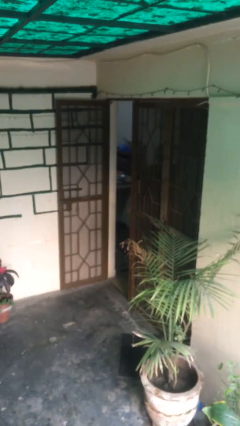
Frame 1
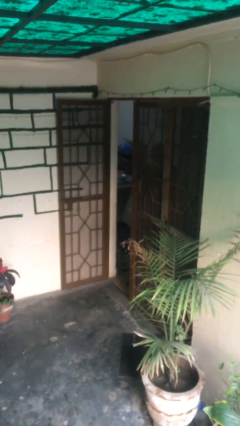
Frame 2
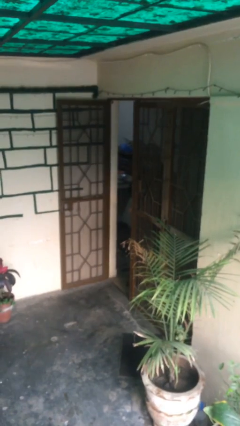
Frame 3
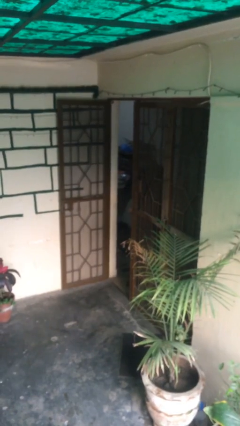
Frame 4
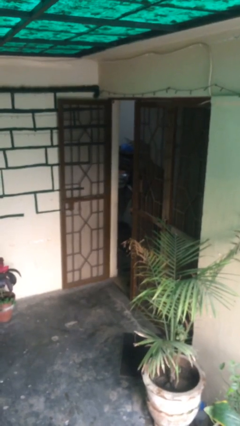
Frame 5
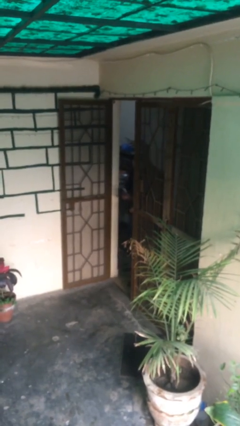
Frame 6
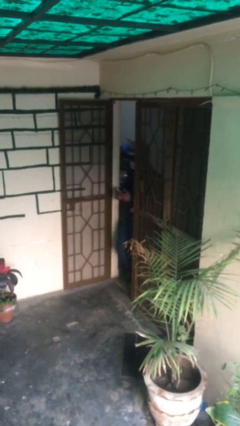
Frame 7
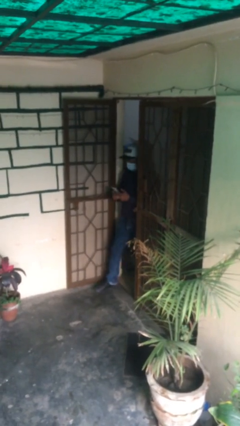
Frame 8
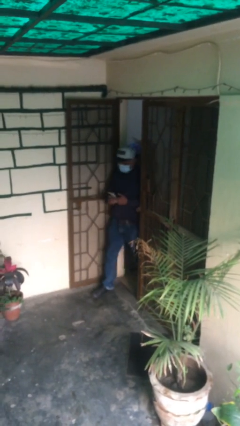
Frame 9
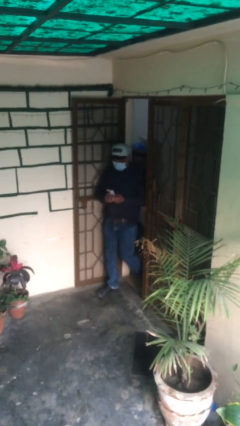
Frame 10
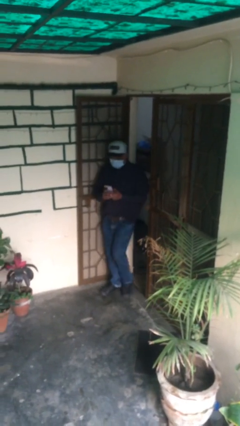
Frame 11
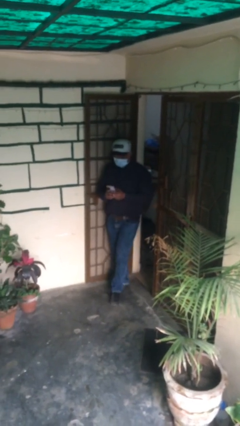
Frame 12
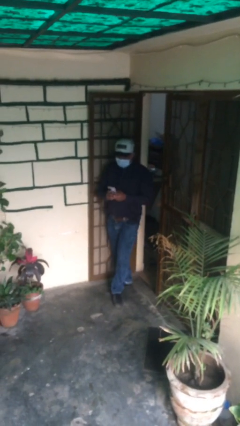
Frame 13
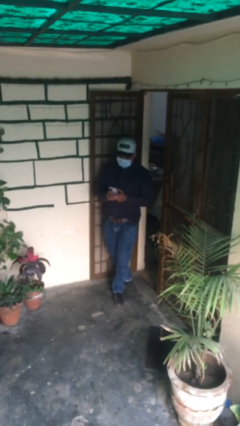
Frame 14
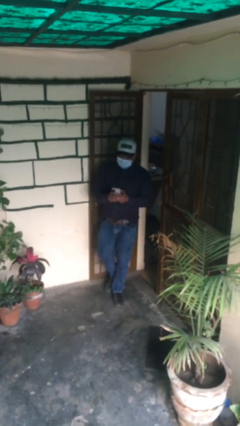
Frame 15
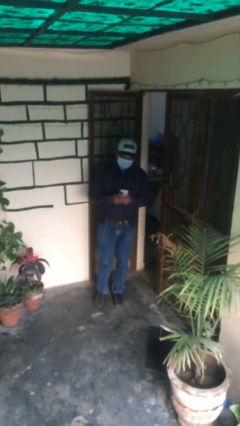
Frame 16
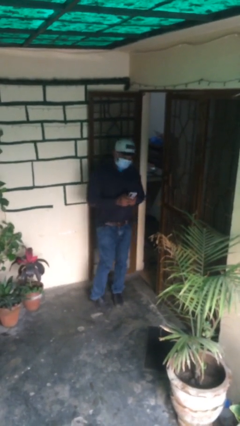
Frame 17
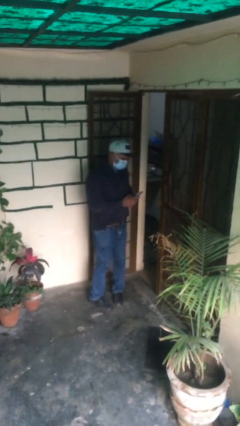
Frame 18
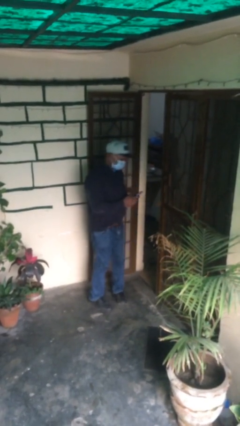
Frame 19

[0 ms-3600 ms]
person enters scene through structure

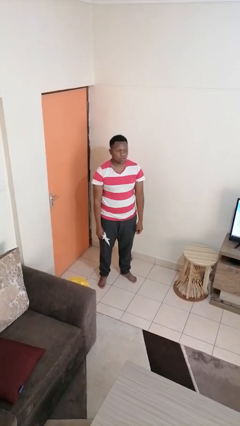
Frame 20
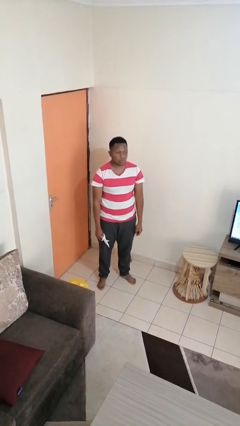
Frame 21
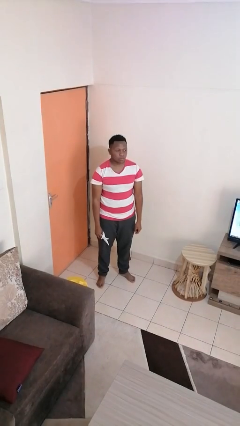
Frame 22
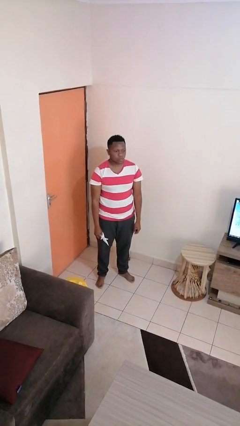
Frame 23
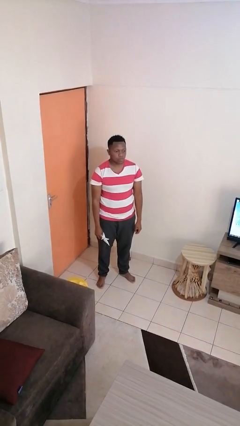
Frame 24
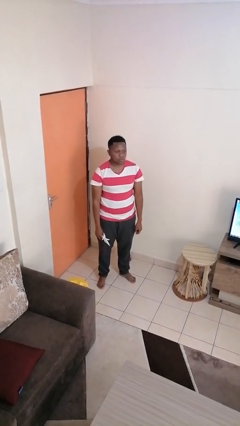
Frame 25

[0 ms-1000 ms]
person blows nose

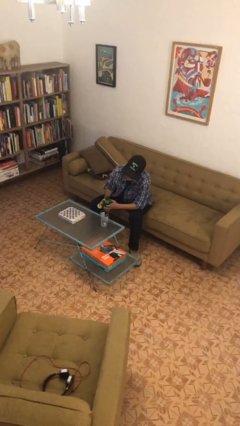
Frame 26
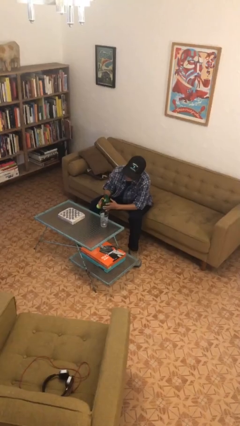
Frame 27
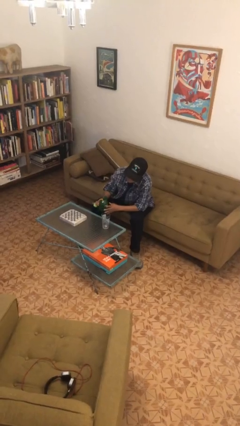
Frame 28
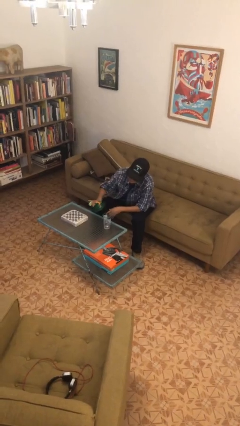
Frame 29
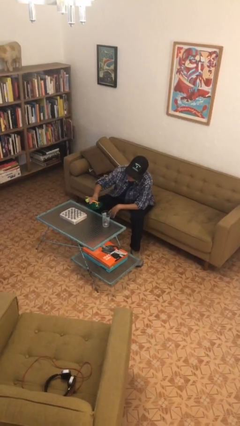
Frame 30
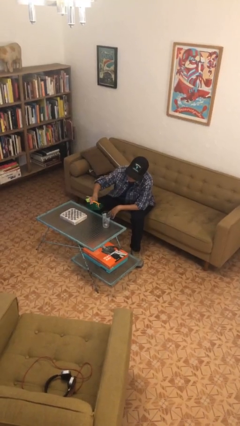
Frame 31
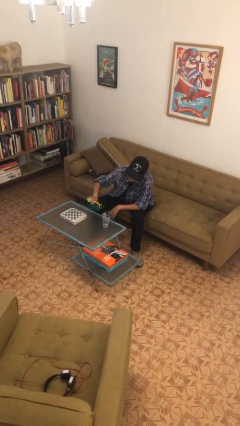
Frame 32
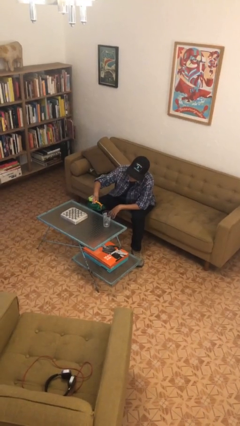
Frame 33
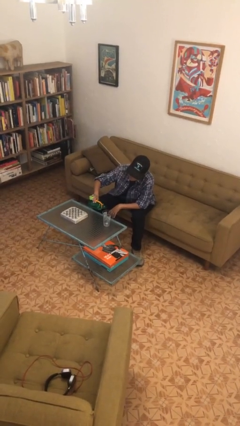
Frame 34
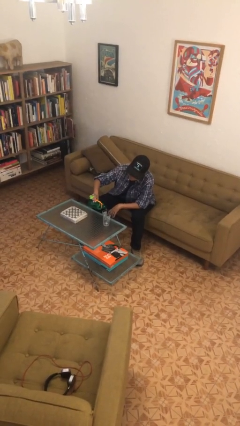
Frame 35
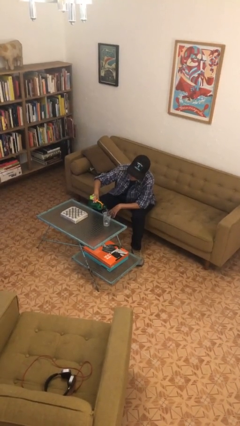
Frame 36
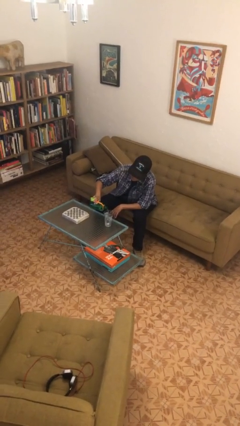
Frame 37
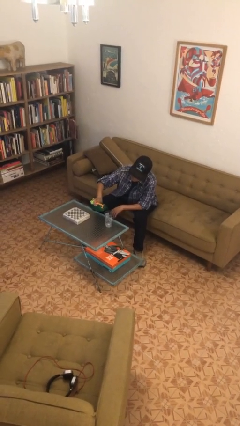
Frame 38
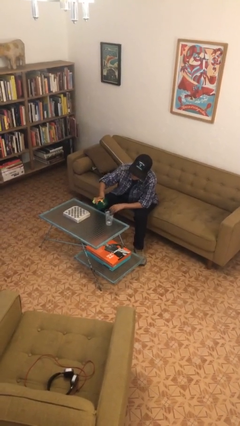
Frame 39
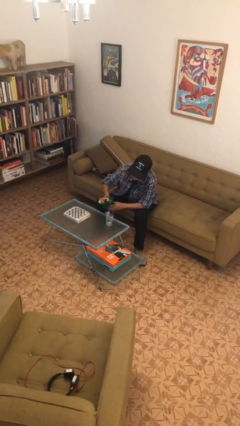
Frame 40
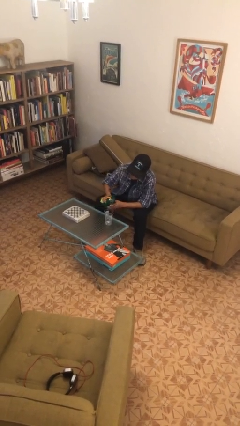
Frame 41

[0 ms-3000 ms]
person pours liquid into cup

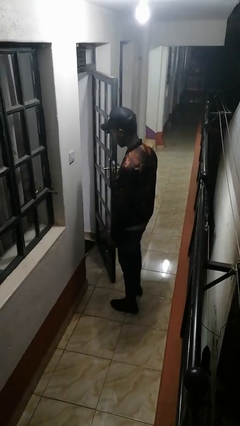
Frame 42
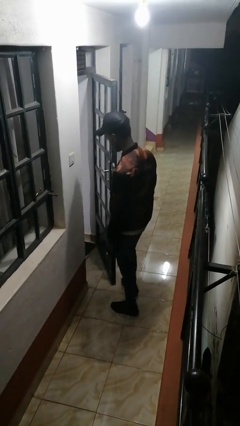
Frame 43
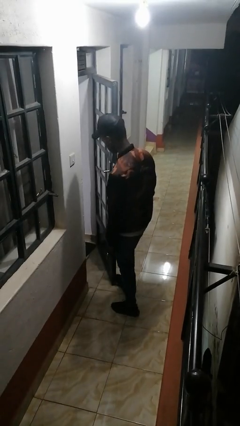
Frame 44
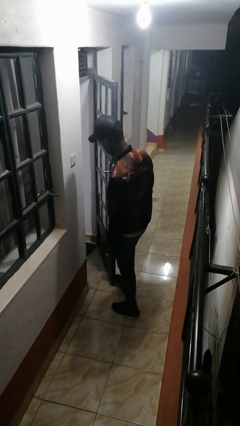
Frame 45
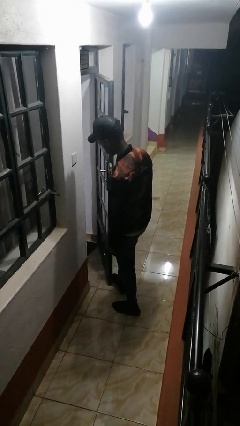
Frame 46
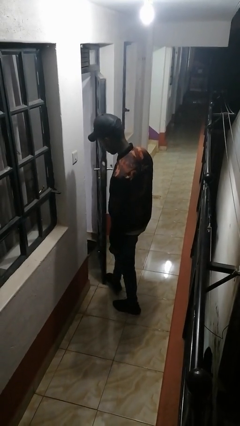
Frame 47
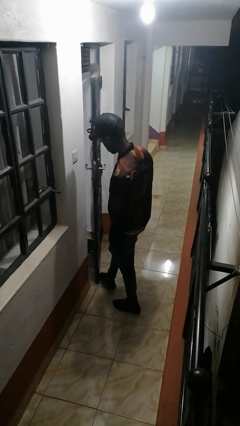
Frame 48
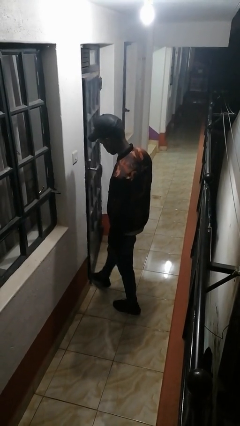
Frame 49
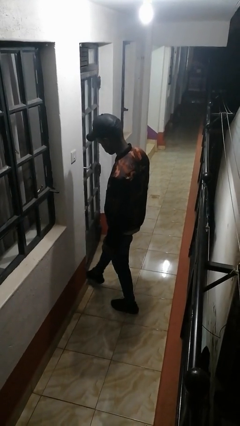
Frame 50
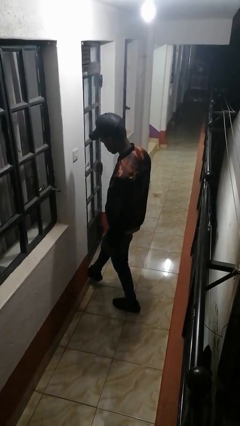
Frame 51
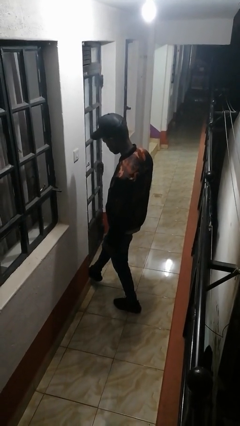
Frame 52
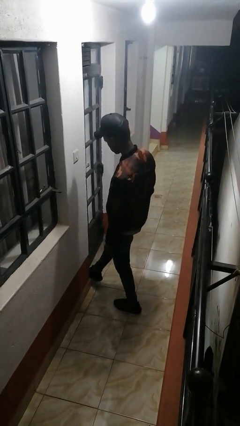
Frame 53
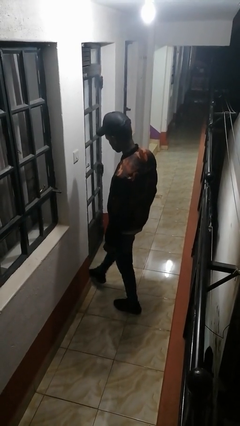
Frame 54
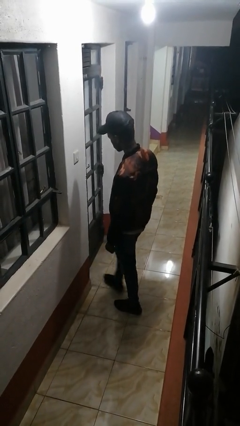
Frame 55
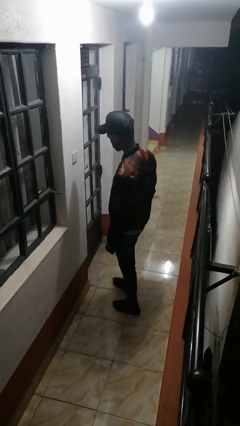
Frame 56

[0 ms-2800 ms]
person closes door with foot

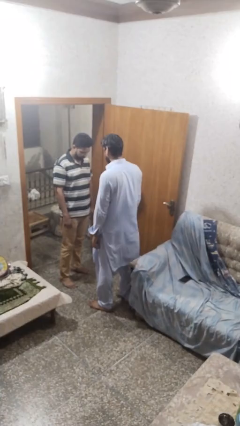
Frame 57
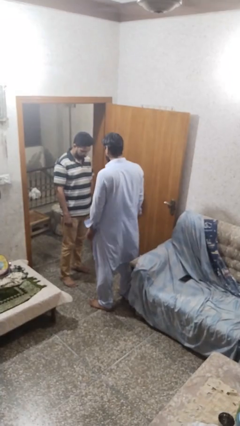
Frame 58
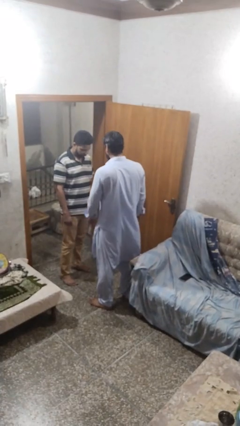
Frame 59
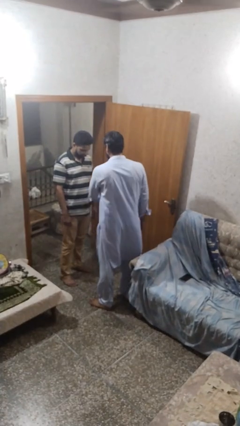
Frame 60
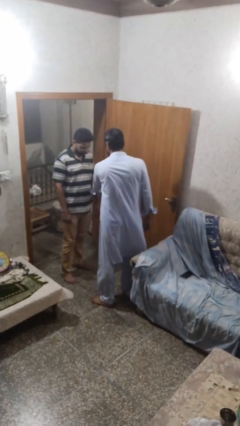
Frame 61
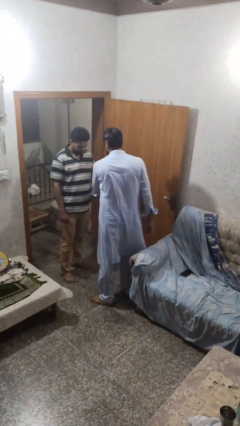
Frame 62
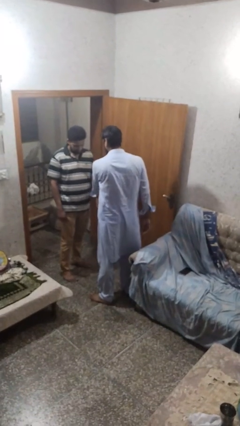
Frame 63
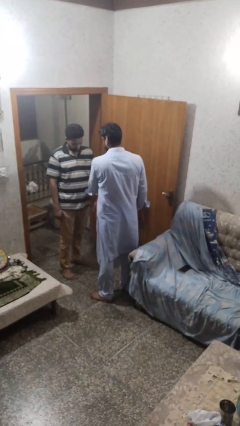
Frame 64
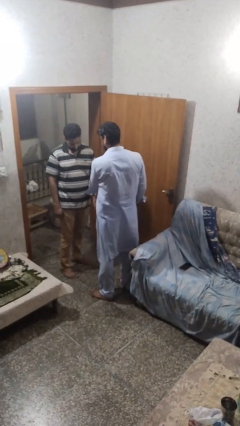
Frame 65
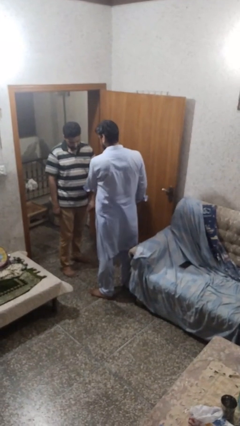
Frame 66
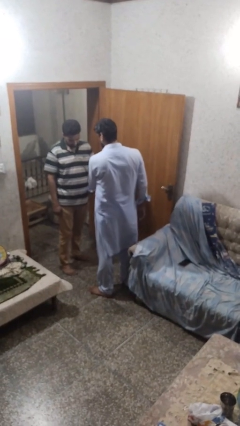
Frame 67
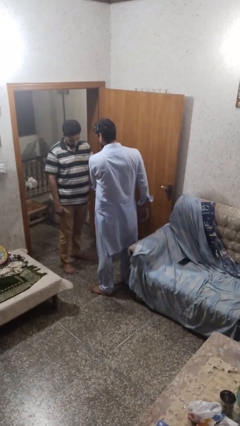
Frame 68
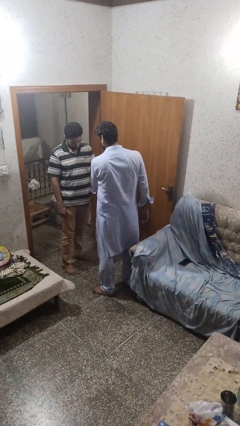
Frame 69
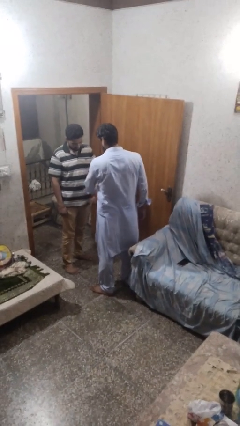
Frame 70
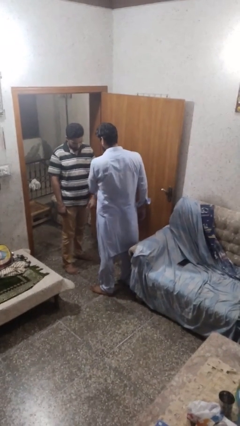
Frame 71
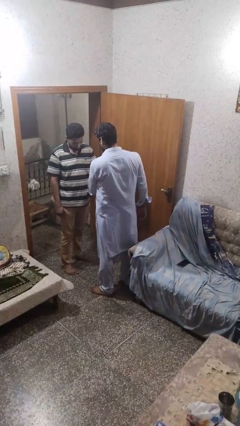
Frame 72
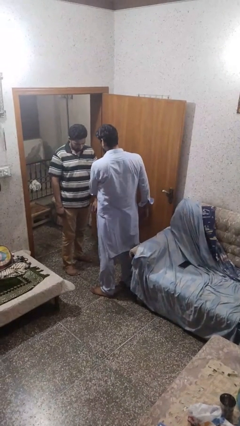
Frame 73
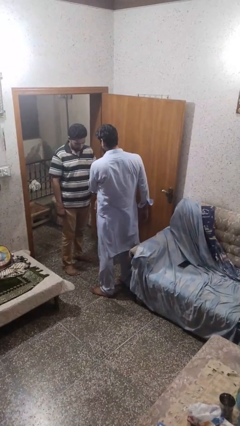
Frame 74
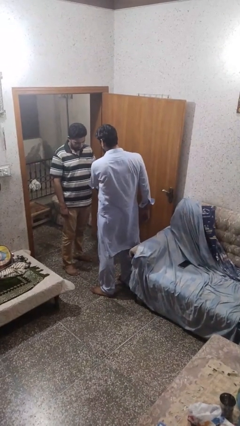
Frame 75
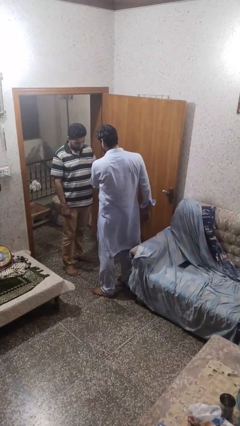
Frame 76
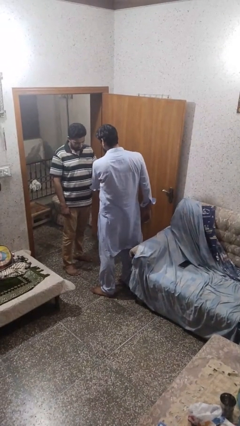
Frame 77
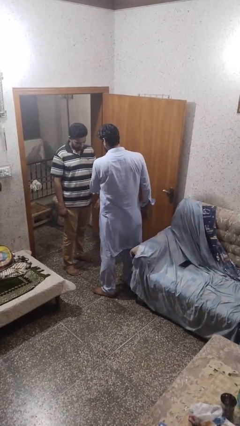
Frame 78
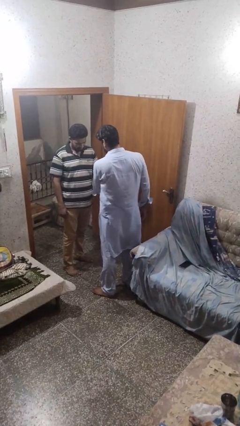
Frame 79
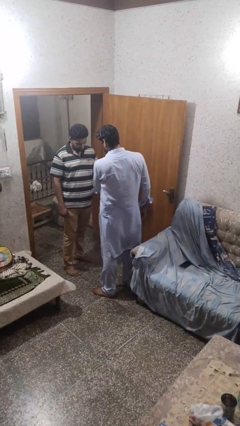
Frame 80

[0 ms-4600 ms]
person grabs person by forearm

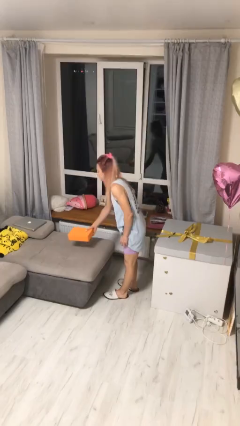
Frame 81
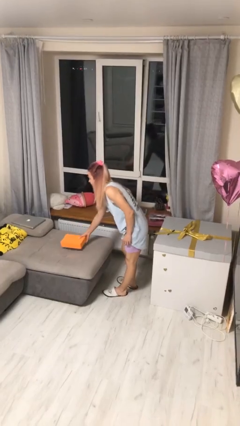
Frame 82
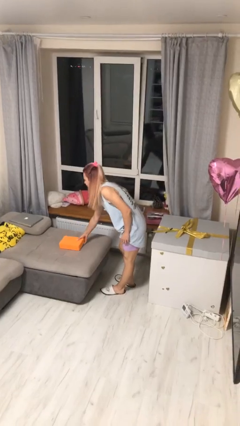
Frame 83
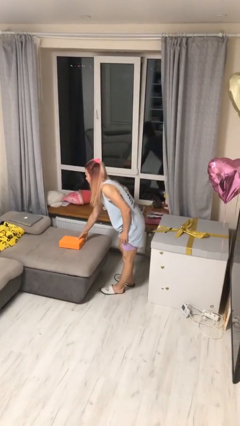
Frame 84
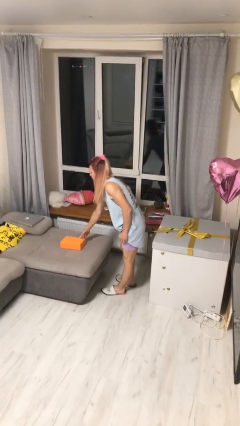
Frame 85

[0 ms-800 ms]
person puts down object on couch

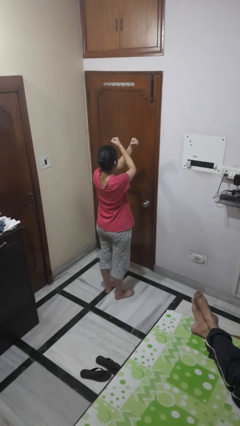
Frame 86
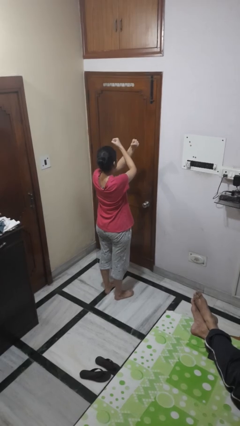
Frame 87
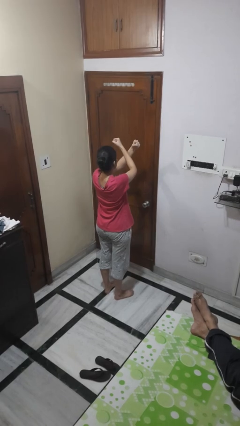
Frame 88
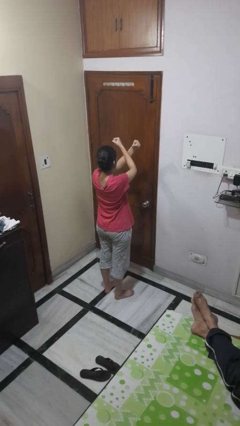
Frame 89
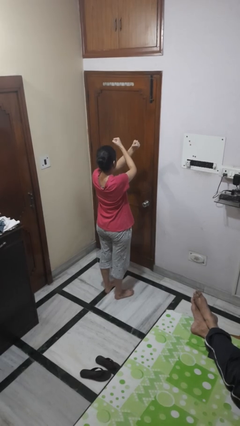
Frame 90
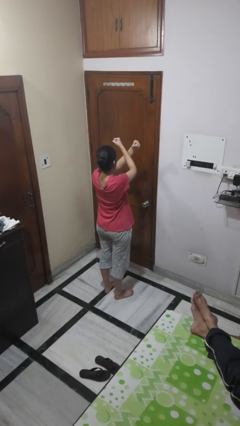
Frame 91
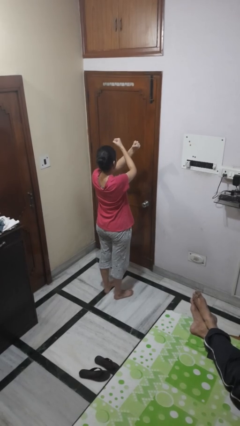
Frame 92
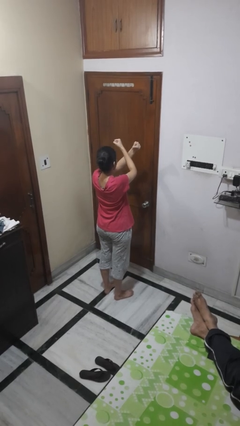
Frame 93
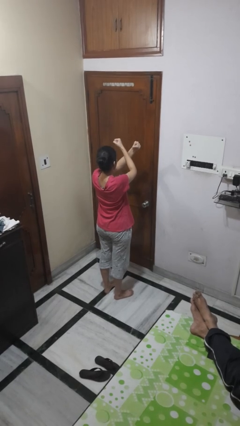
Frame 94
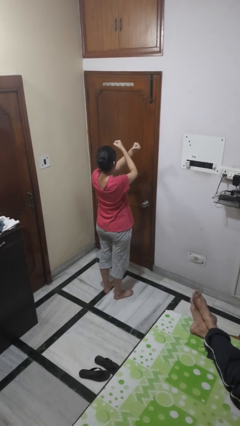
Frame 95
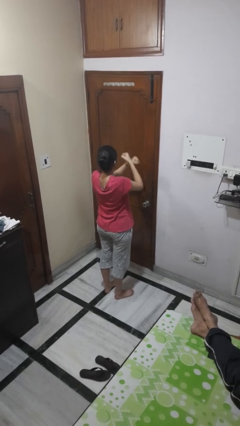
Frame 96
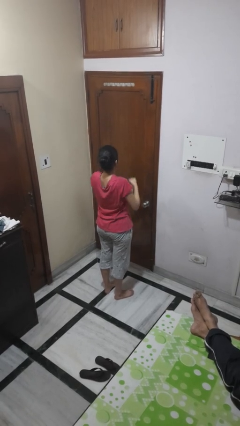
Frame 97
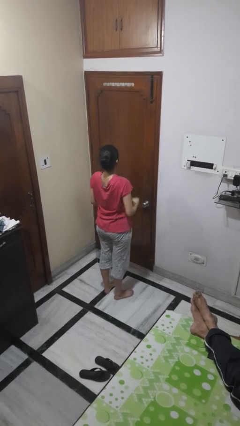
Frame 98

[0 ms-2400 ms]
person gestures arms x
